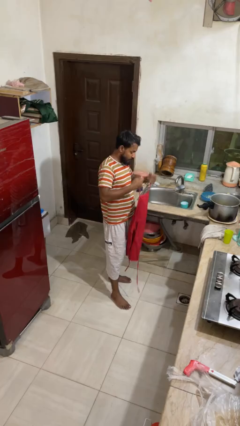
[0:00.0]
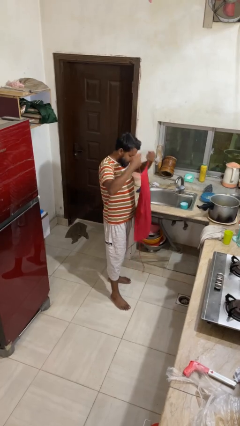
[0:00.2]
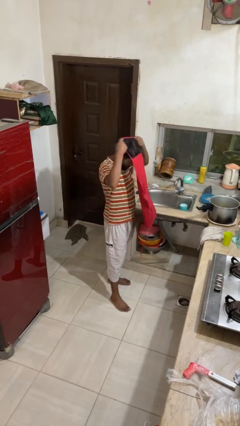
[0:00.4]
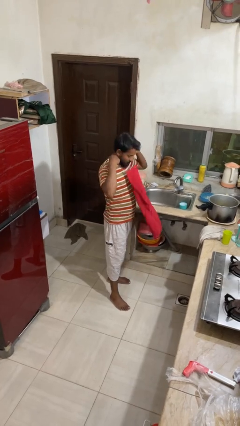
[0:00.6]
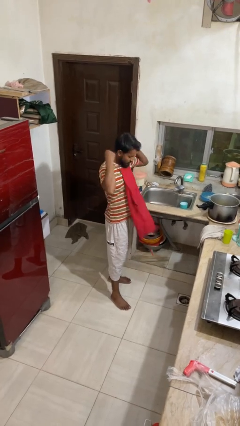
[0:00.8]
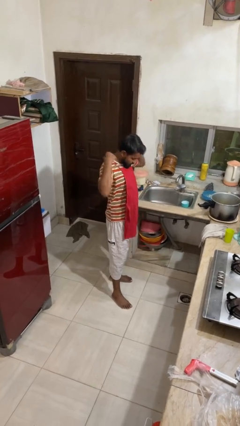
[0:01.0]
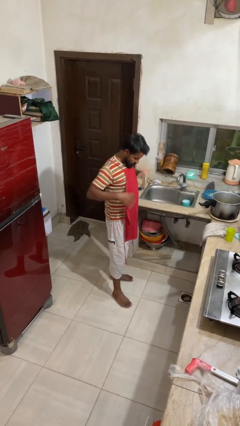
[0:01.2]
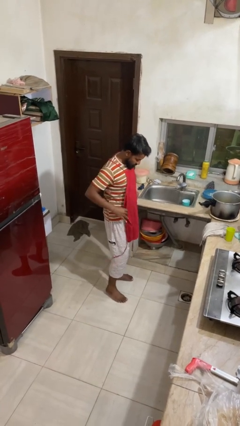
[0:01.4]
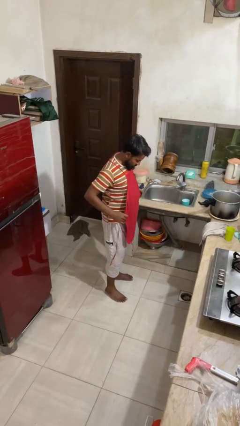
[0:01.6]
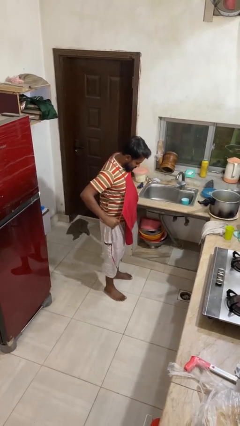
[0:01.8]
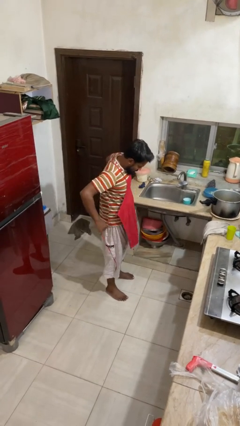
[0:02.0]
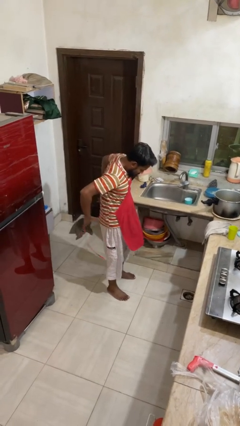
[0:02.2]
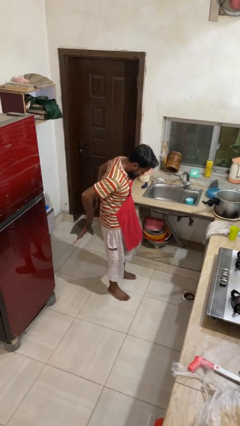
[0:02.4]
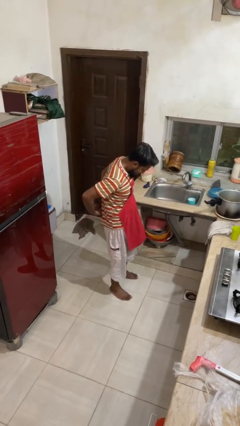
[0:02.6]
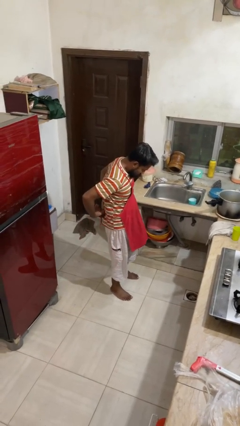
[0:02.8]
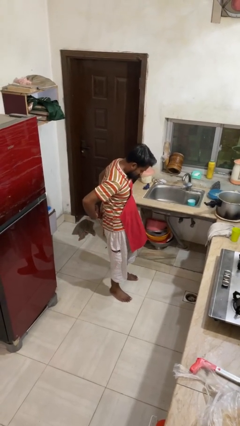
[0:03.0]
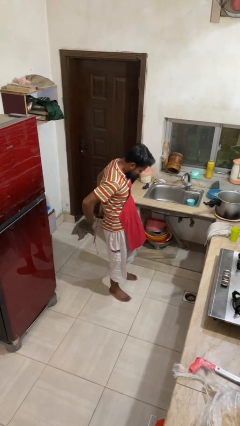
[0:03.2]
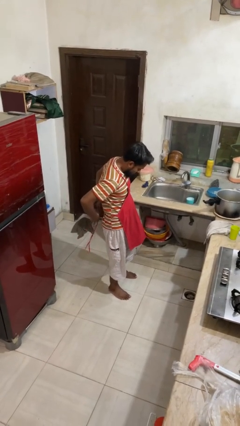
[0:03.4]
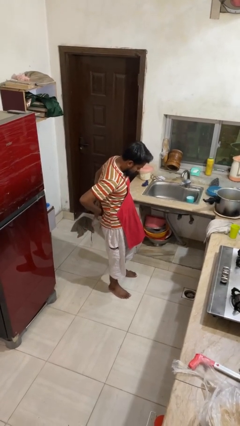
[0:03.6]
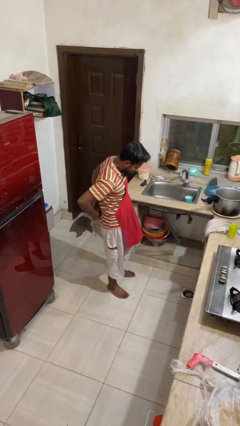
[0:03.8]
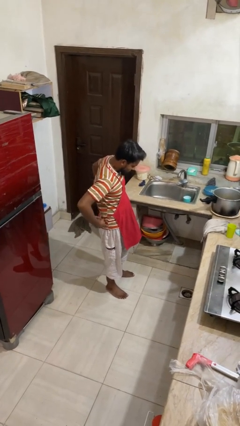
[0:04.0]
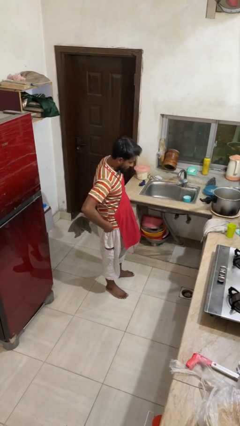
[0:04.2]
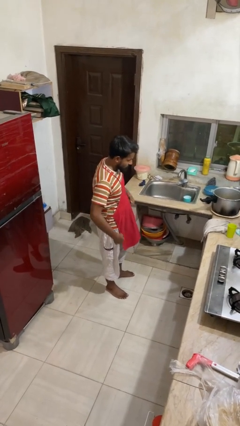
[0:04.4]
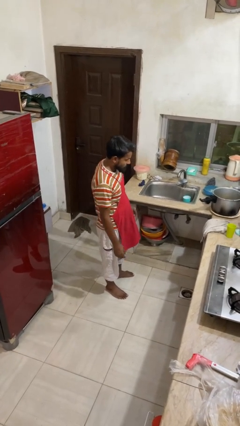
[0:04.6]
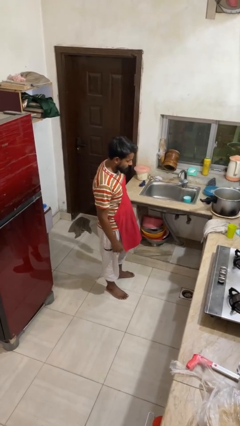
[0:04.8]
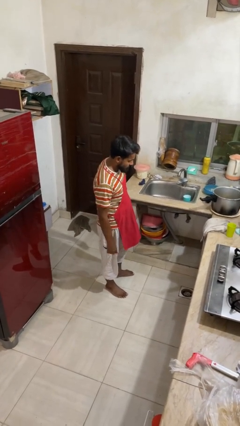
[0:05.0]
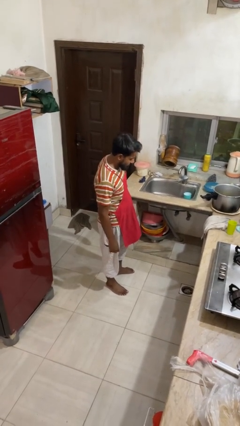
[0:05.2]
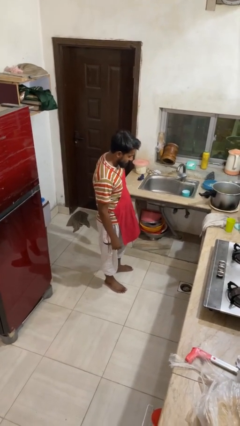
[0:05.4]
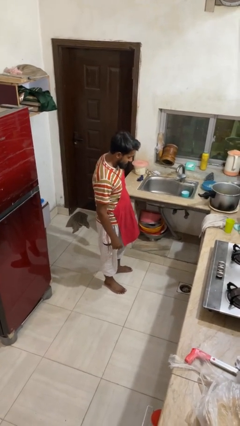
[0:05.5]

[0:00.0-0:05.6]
person puts on apron

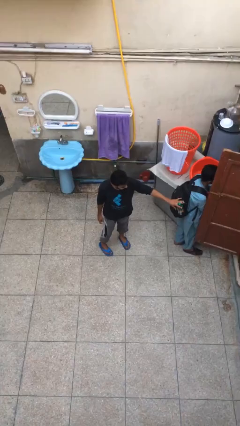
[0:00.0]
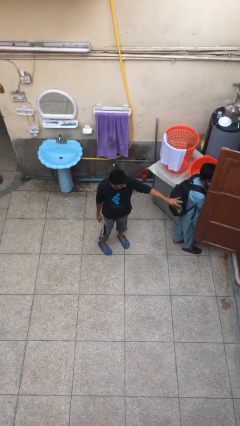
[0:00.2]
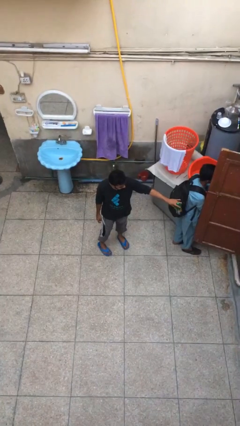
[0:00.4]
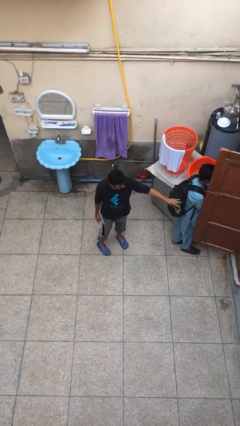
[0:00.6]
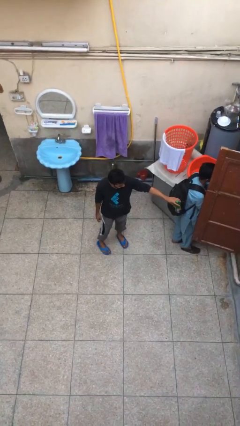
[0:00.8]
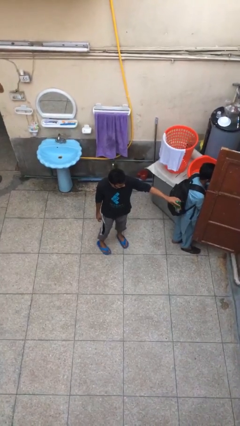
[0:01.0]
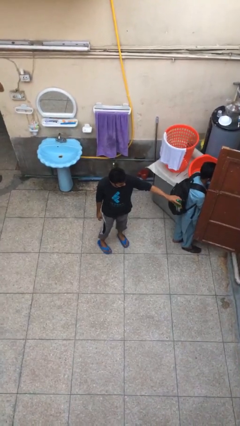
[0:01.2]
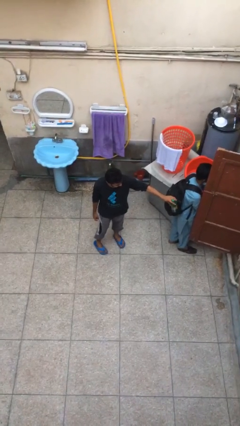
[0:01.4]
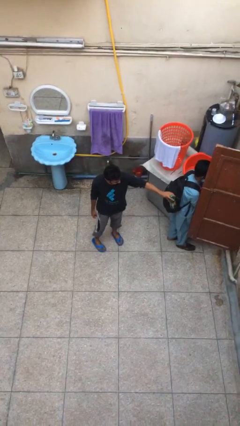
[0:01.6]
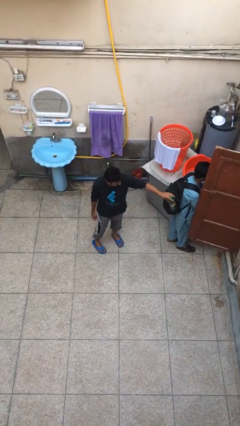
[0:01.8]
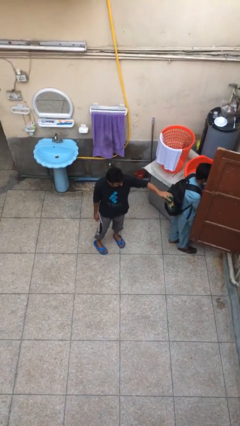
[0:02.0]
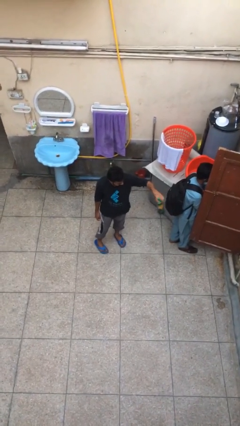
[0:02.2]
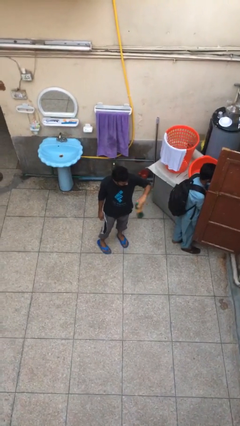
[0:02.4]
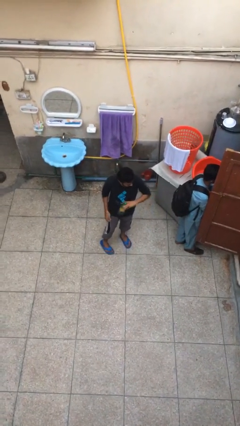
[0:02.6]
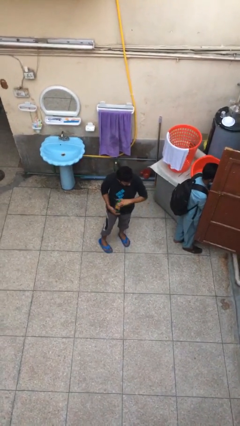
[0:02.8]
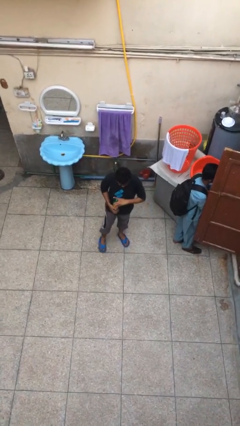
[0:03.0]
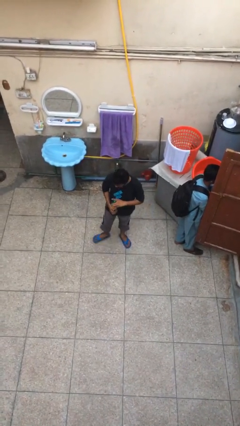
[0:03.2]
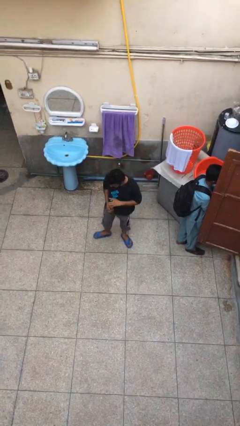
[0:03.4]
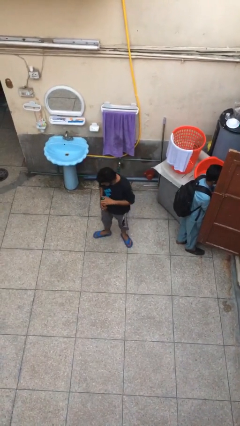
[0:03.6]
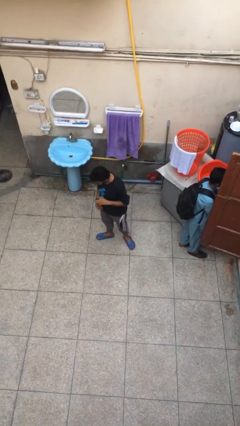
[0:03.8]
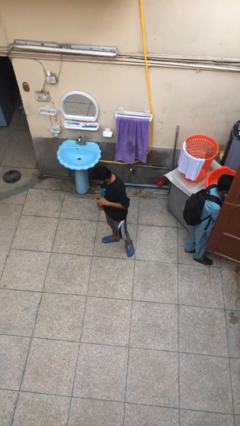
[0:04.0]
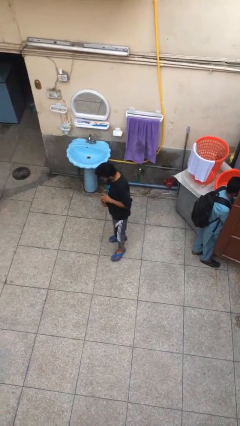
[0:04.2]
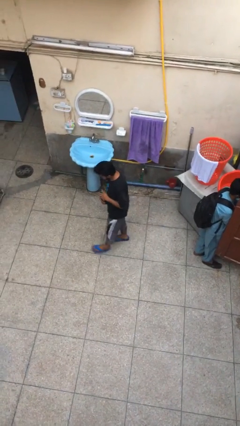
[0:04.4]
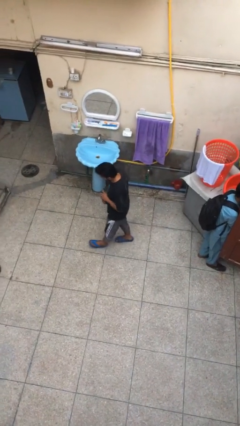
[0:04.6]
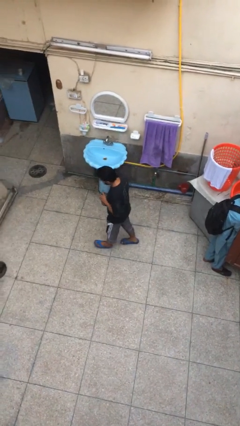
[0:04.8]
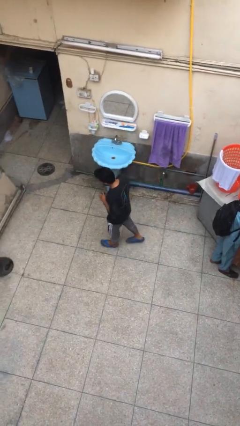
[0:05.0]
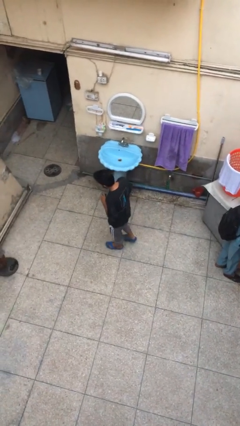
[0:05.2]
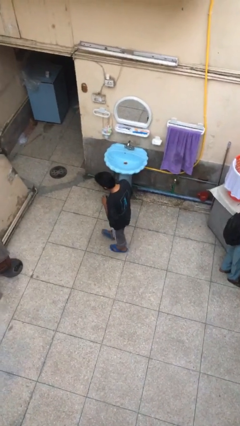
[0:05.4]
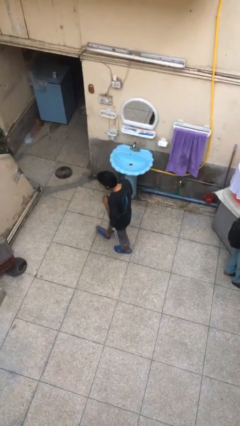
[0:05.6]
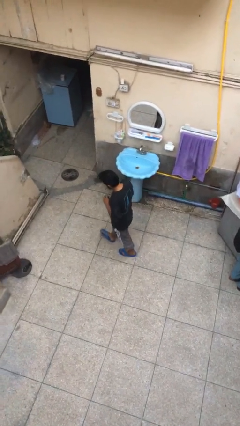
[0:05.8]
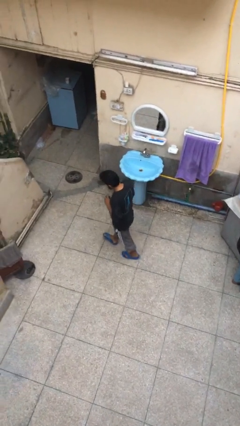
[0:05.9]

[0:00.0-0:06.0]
person steals object from person

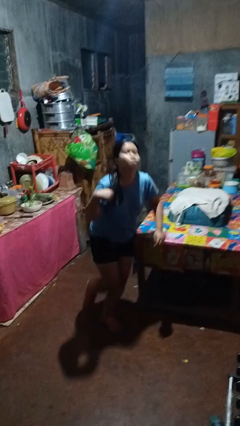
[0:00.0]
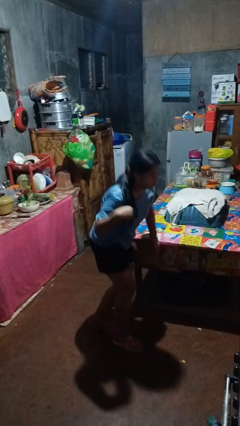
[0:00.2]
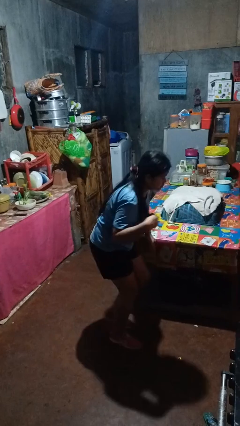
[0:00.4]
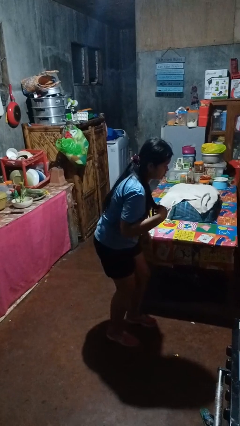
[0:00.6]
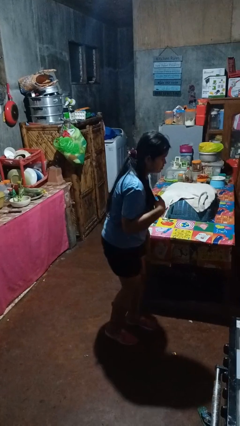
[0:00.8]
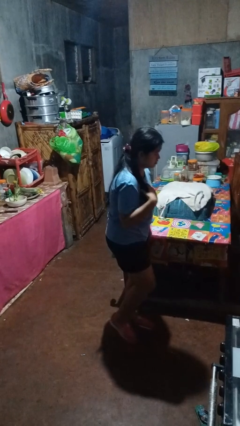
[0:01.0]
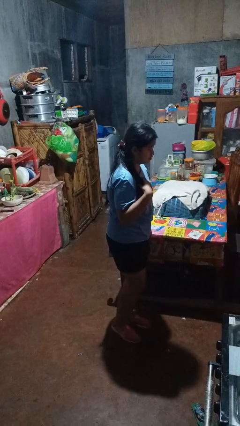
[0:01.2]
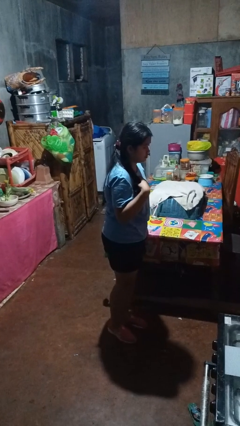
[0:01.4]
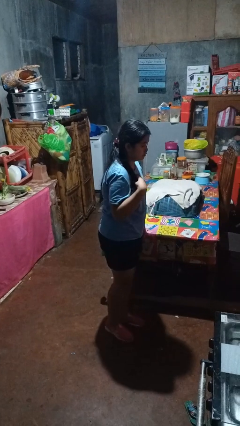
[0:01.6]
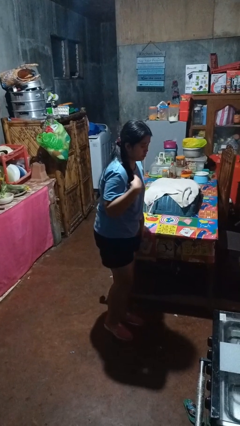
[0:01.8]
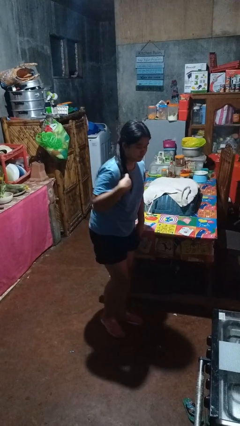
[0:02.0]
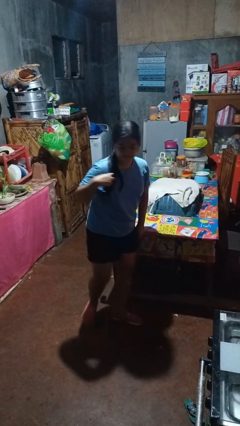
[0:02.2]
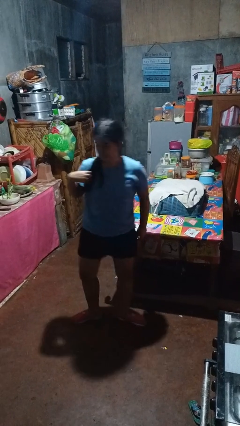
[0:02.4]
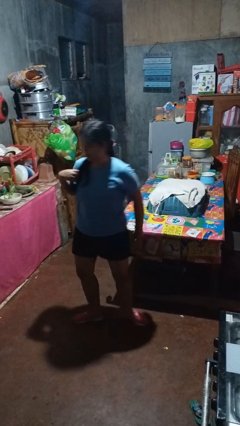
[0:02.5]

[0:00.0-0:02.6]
person bumps into table

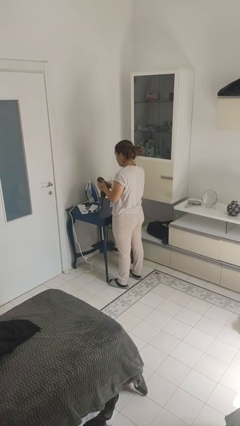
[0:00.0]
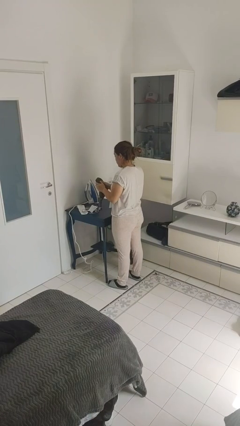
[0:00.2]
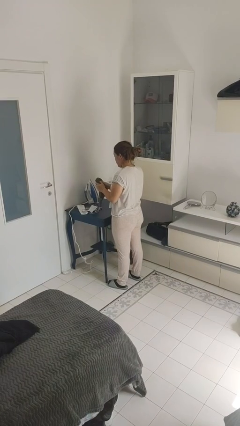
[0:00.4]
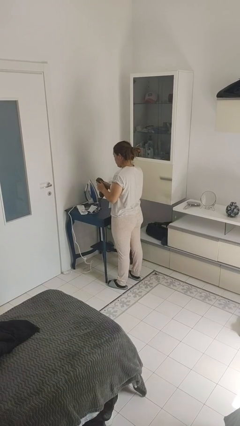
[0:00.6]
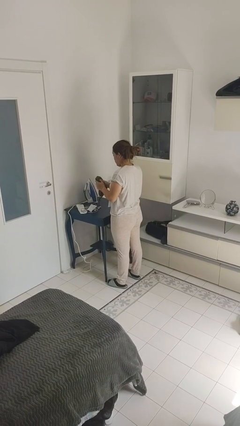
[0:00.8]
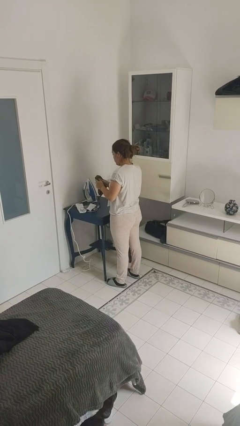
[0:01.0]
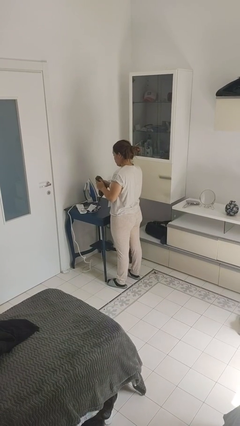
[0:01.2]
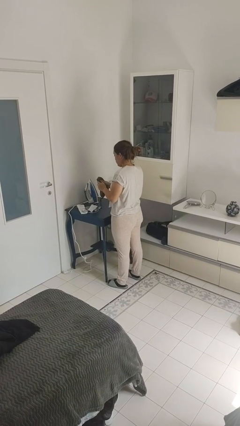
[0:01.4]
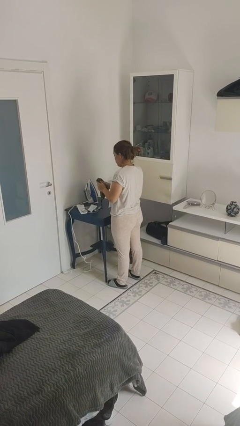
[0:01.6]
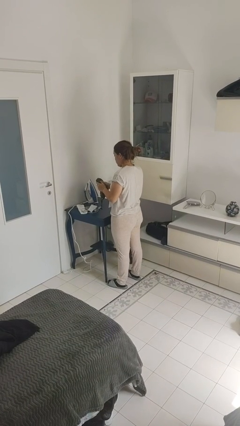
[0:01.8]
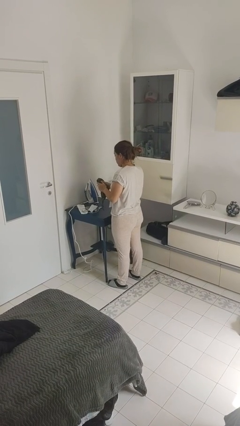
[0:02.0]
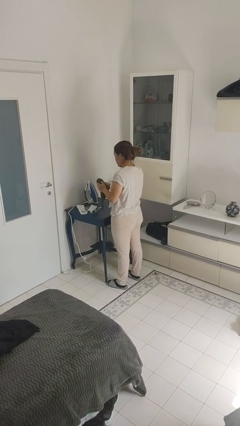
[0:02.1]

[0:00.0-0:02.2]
person squeezes object

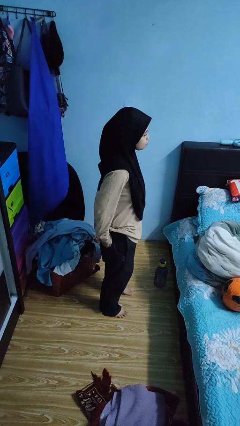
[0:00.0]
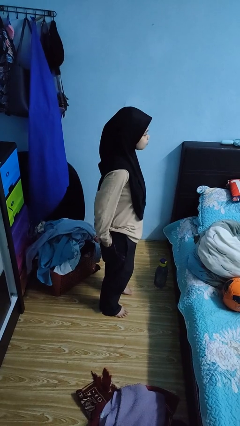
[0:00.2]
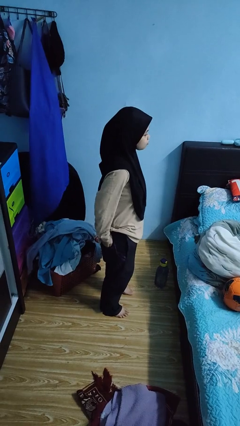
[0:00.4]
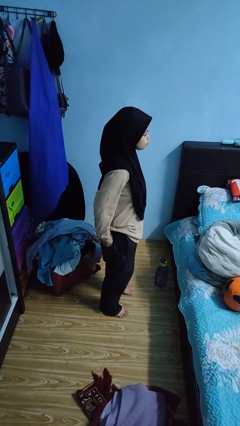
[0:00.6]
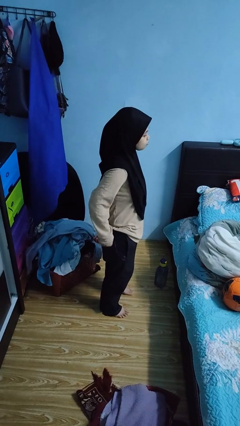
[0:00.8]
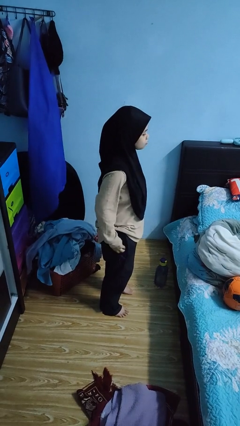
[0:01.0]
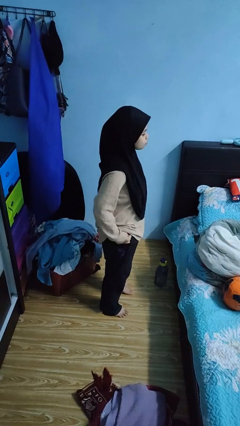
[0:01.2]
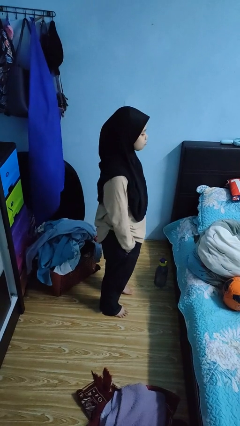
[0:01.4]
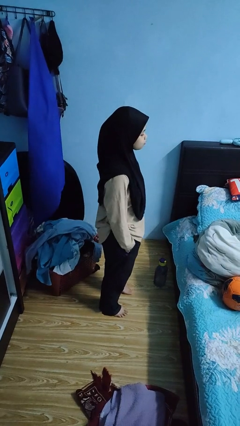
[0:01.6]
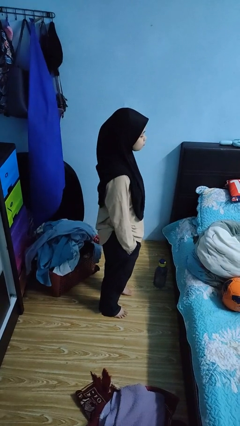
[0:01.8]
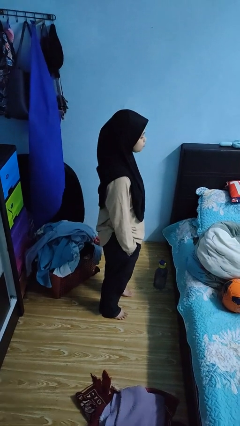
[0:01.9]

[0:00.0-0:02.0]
person puts hands in back pockets
